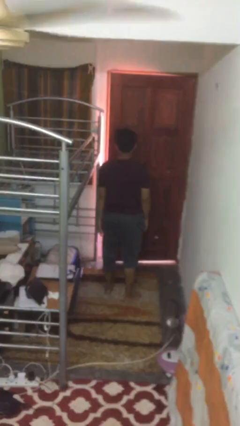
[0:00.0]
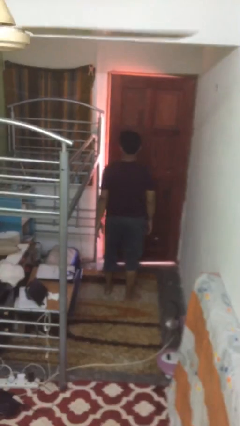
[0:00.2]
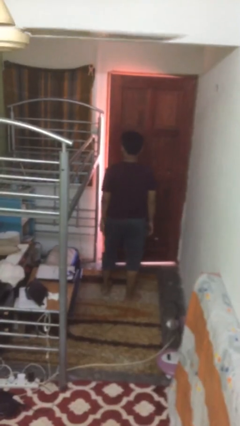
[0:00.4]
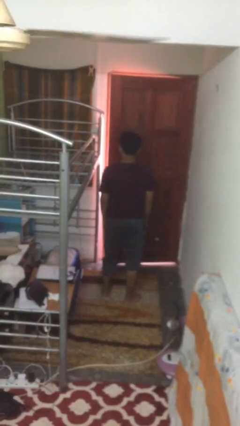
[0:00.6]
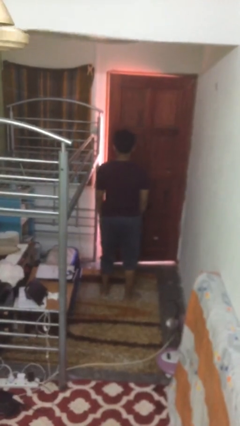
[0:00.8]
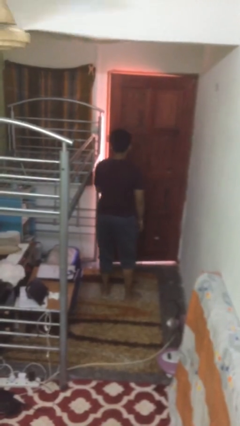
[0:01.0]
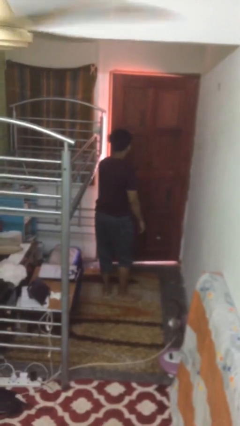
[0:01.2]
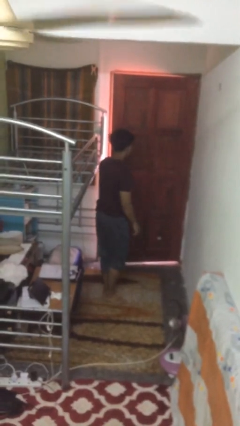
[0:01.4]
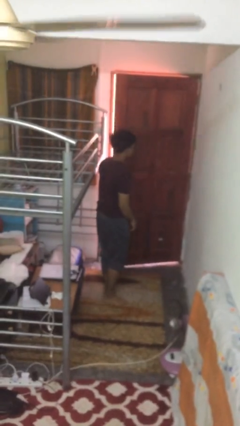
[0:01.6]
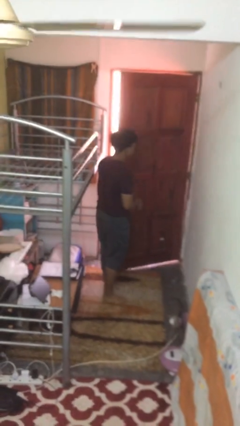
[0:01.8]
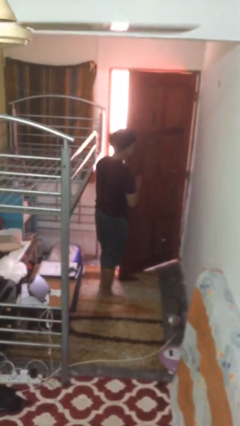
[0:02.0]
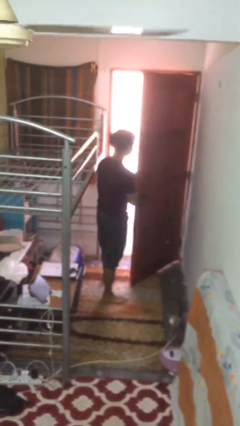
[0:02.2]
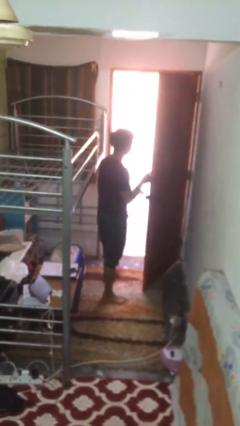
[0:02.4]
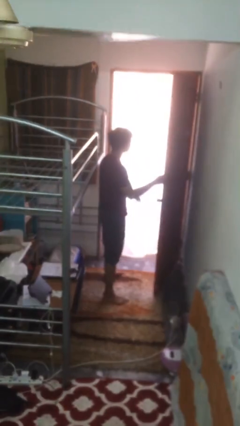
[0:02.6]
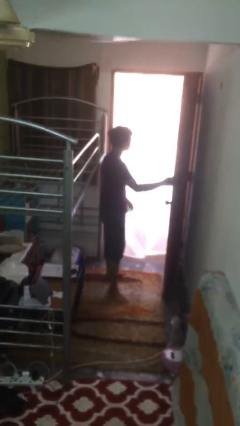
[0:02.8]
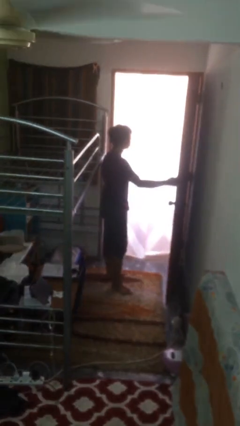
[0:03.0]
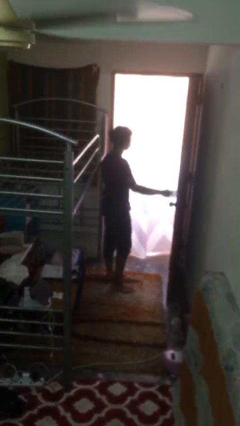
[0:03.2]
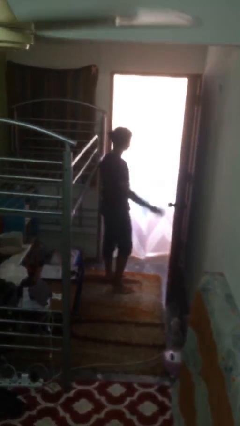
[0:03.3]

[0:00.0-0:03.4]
person opens facility door

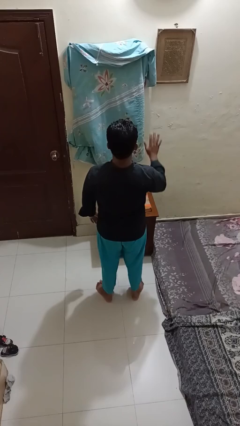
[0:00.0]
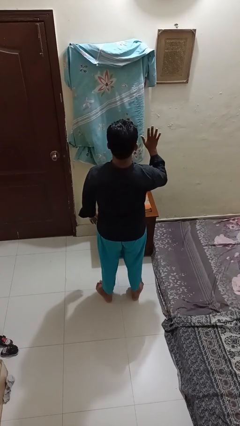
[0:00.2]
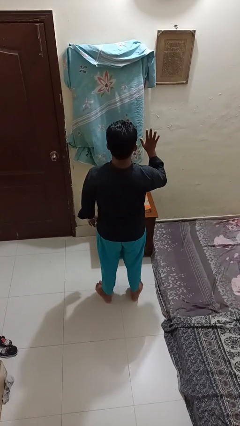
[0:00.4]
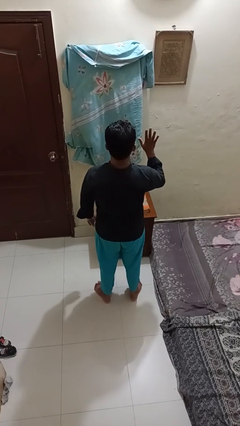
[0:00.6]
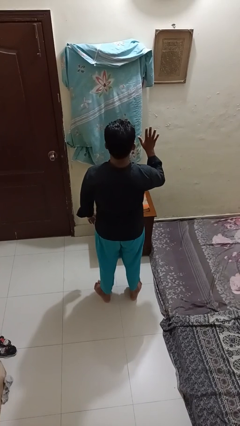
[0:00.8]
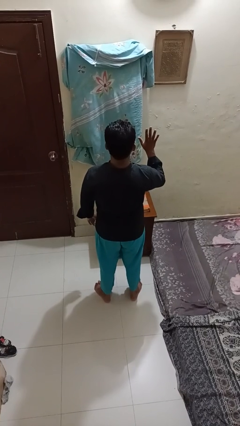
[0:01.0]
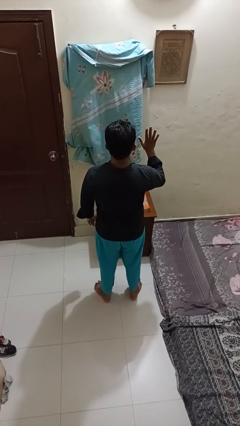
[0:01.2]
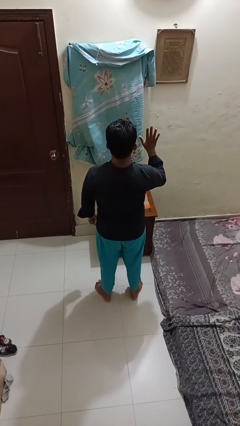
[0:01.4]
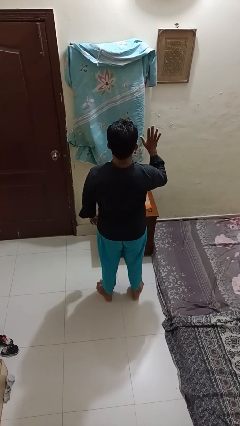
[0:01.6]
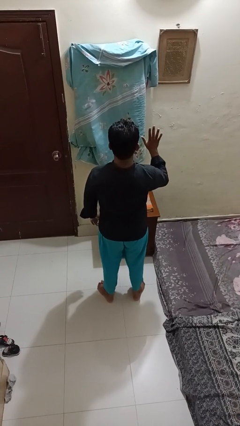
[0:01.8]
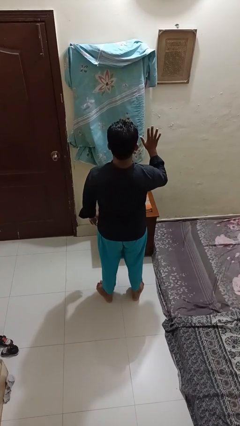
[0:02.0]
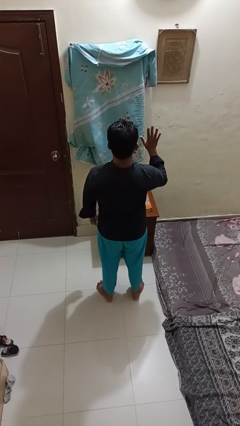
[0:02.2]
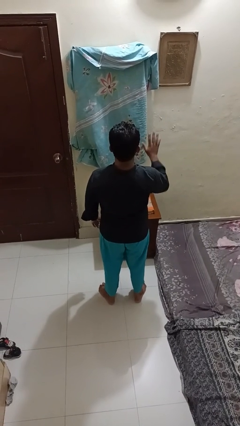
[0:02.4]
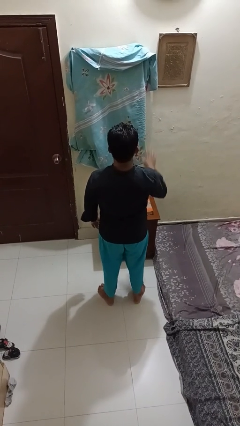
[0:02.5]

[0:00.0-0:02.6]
person gestures number five

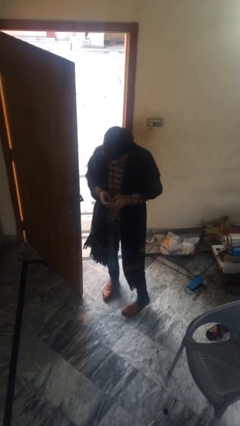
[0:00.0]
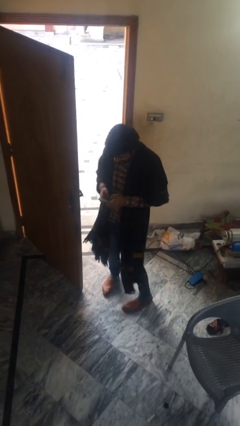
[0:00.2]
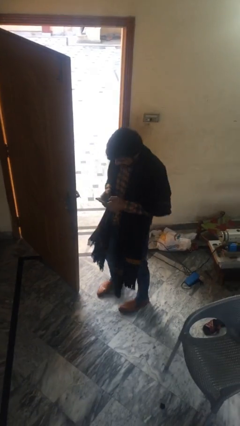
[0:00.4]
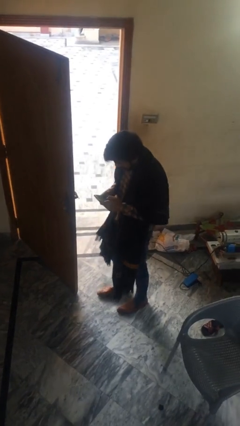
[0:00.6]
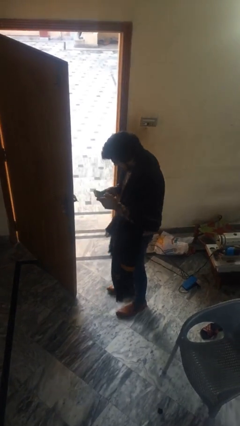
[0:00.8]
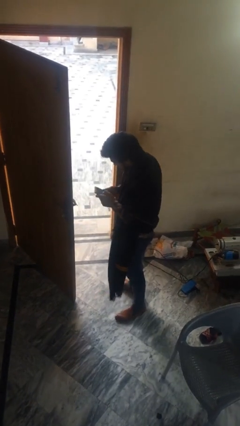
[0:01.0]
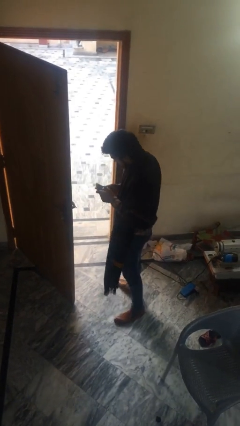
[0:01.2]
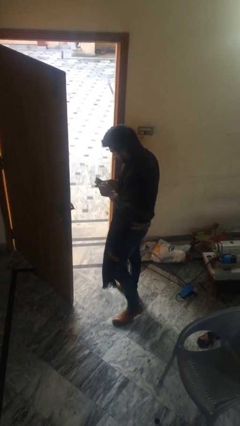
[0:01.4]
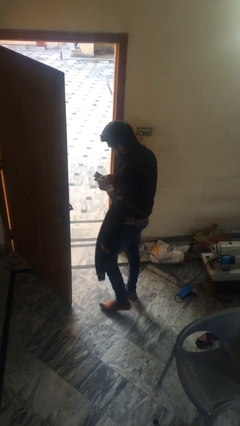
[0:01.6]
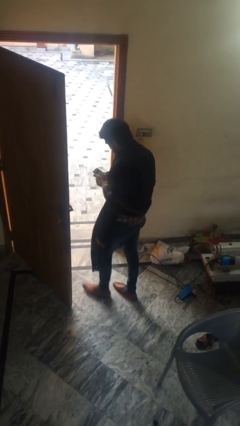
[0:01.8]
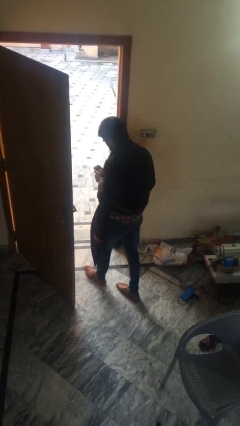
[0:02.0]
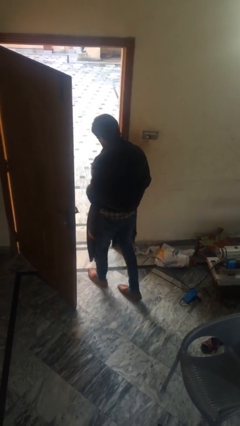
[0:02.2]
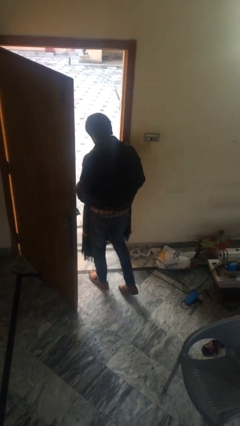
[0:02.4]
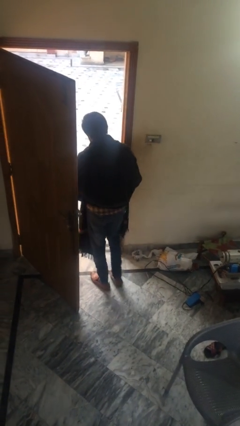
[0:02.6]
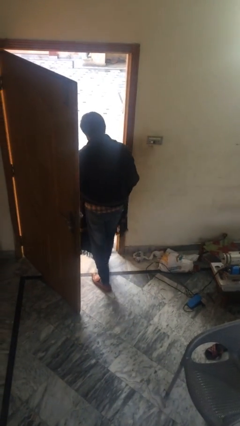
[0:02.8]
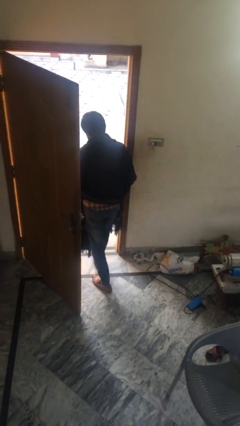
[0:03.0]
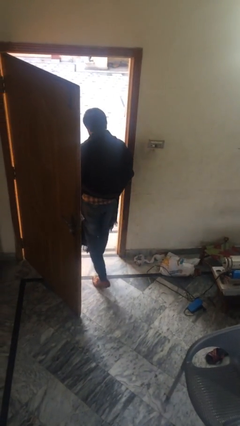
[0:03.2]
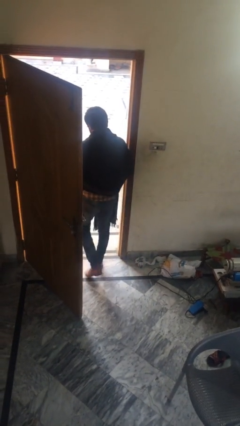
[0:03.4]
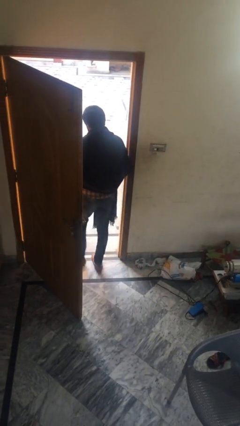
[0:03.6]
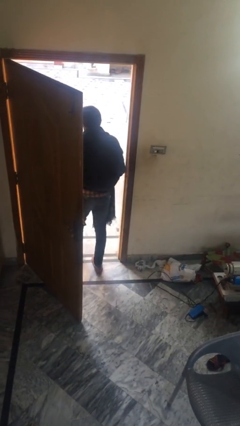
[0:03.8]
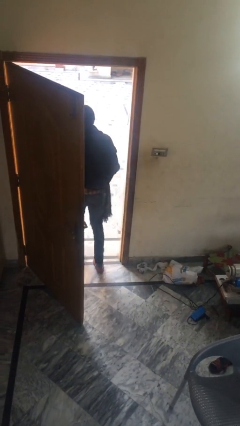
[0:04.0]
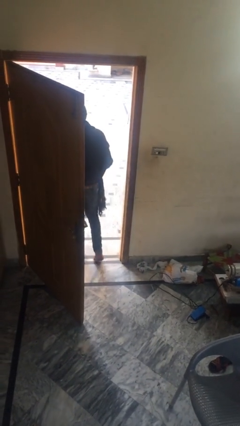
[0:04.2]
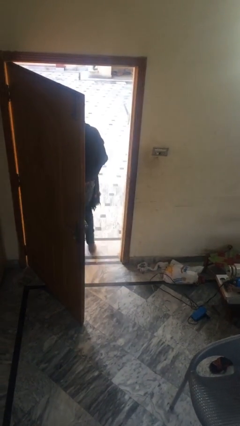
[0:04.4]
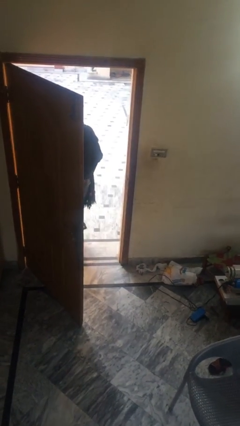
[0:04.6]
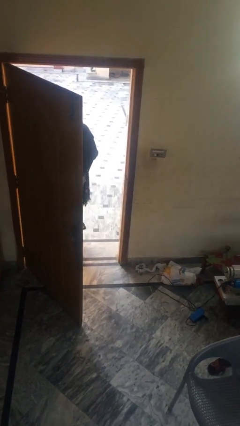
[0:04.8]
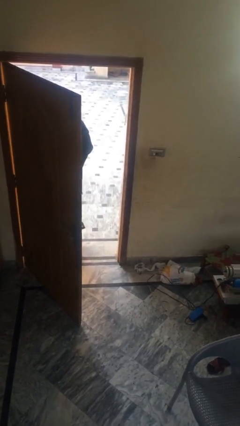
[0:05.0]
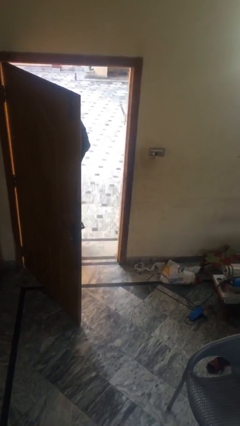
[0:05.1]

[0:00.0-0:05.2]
person exits scene through structure

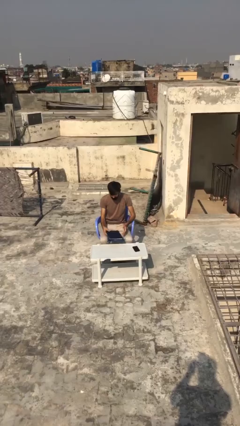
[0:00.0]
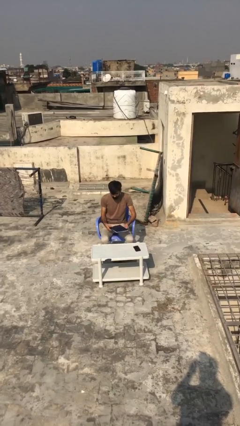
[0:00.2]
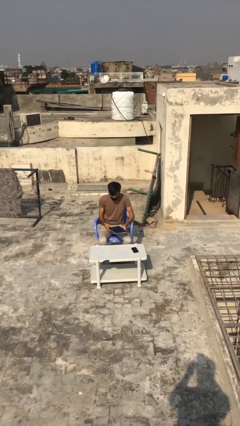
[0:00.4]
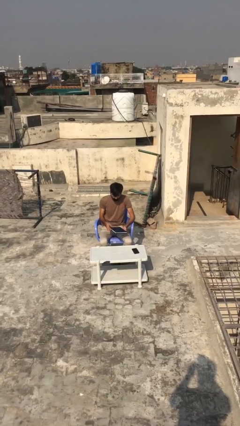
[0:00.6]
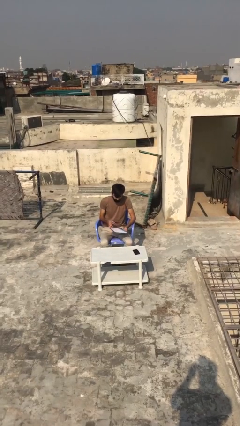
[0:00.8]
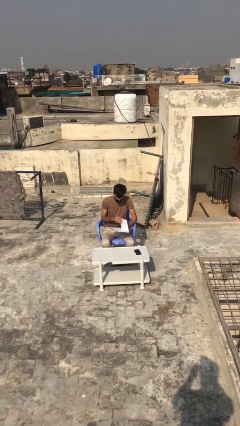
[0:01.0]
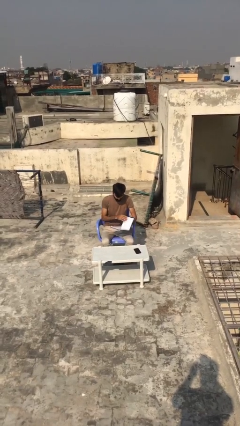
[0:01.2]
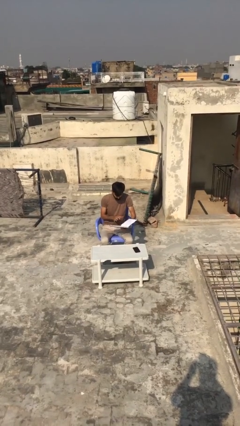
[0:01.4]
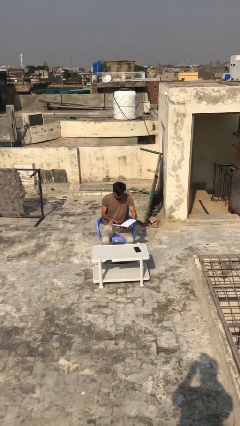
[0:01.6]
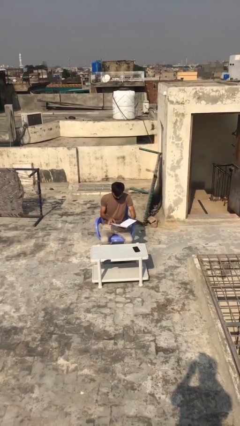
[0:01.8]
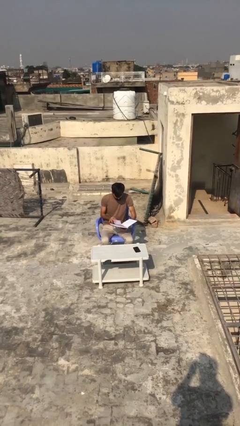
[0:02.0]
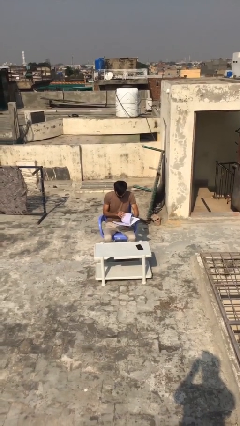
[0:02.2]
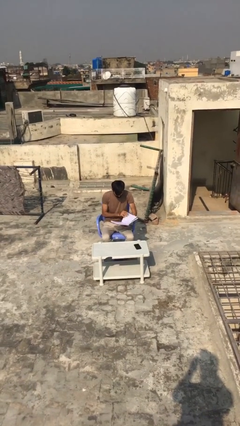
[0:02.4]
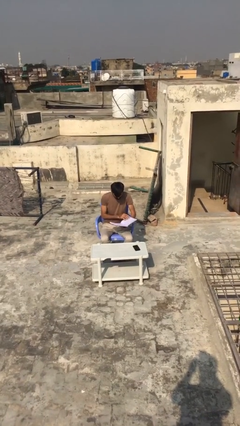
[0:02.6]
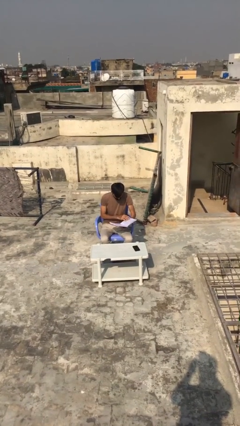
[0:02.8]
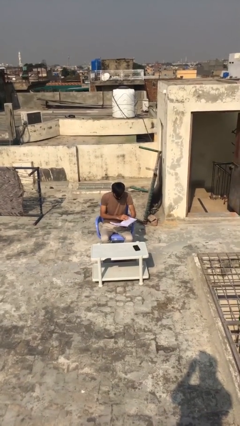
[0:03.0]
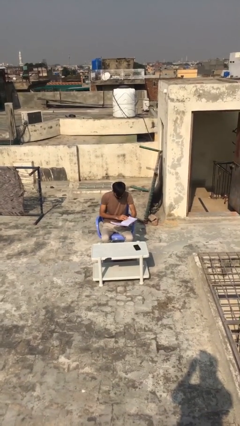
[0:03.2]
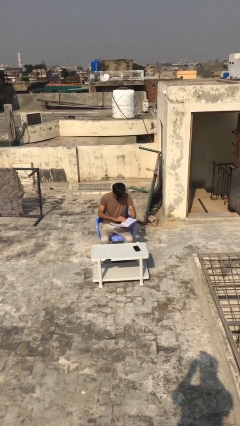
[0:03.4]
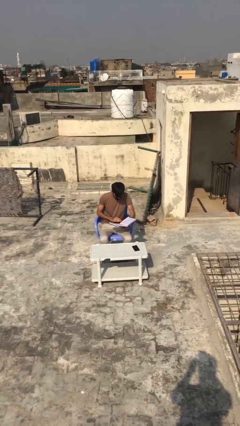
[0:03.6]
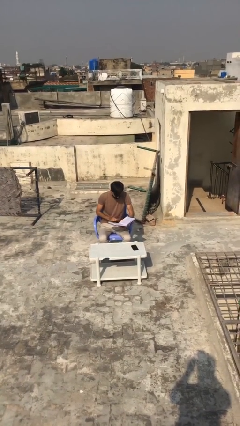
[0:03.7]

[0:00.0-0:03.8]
person reads document

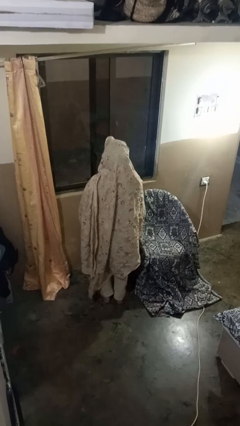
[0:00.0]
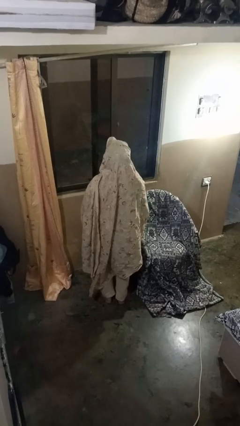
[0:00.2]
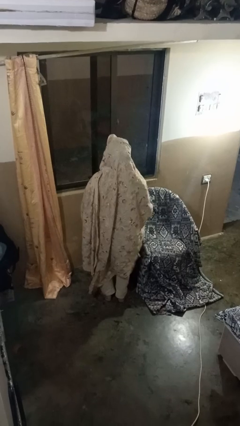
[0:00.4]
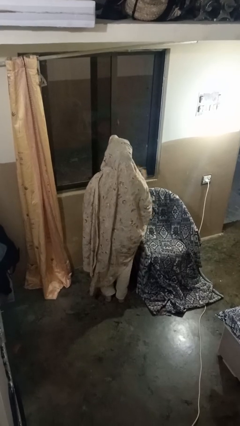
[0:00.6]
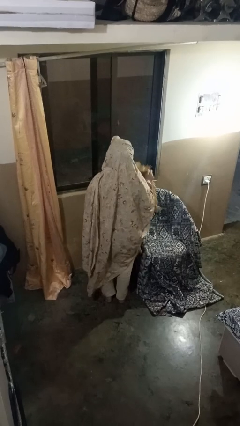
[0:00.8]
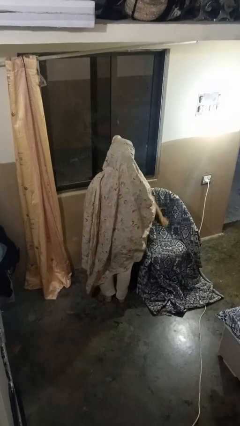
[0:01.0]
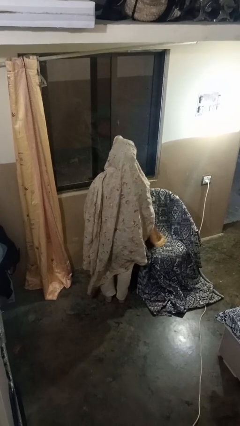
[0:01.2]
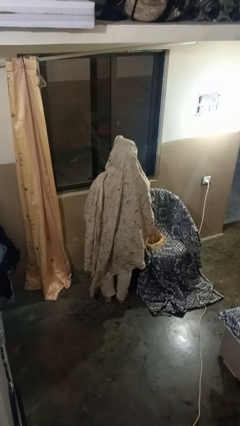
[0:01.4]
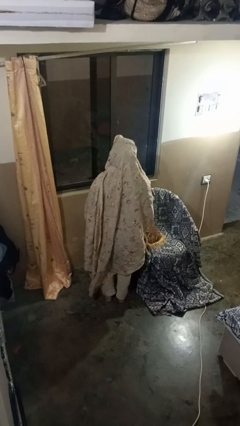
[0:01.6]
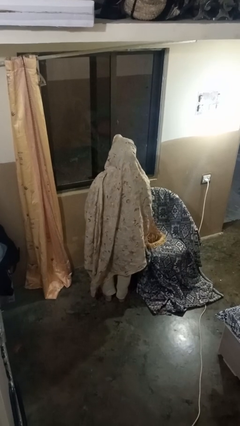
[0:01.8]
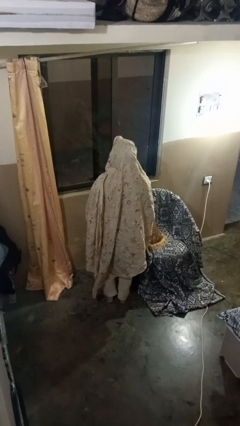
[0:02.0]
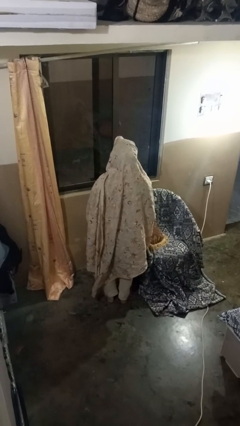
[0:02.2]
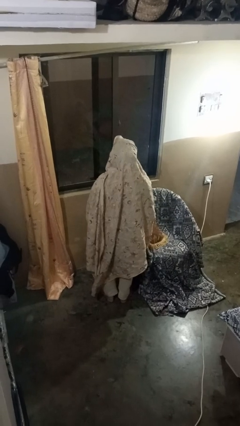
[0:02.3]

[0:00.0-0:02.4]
person puts down object on couch
